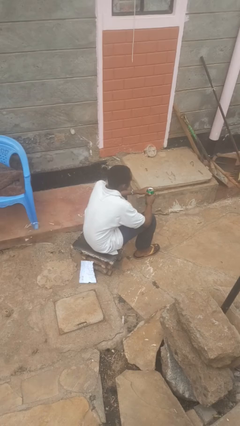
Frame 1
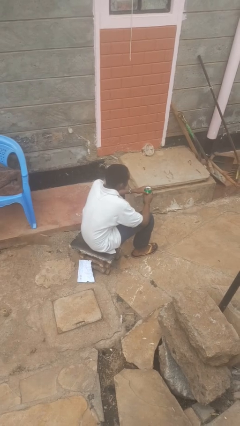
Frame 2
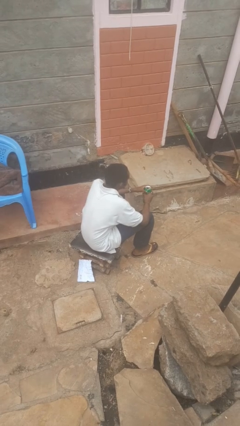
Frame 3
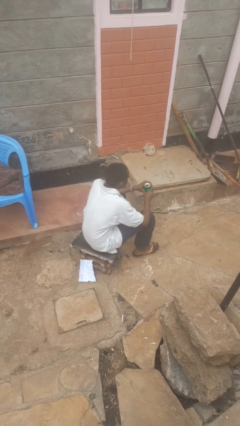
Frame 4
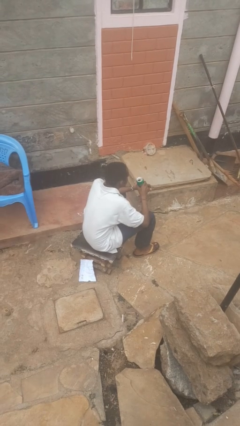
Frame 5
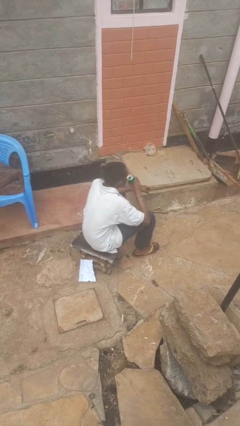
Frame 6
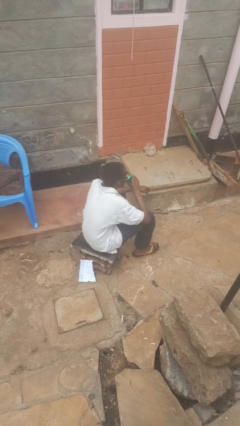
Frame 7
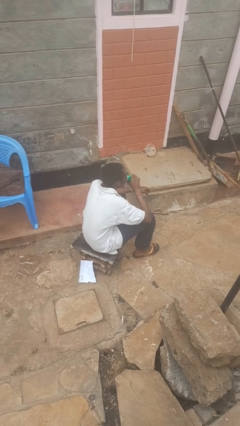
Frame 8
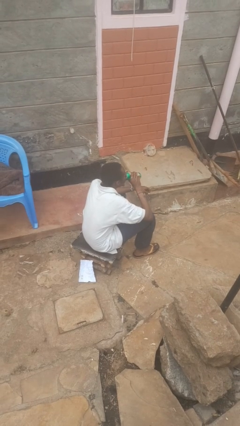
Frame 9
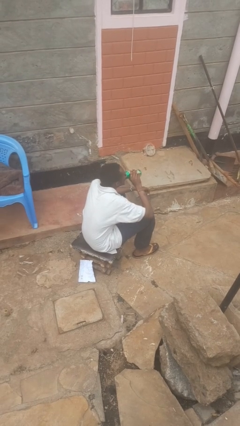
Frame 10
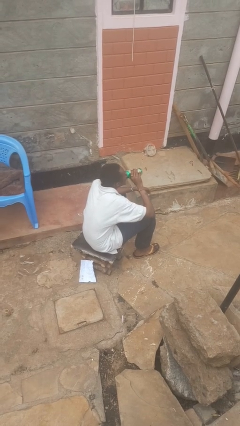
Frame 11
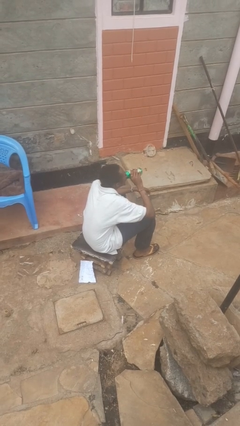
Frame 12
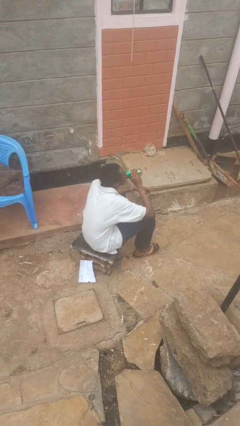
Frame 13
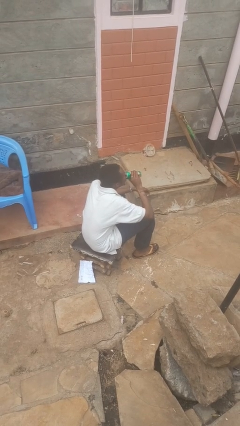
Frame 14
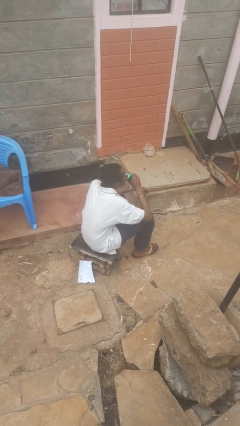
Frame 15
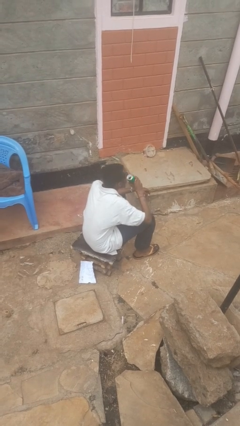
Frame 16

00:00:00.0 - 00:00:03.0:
person drinks from beverage can

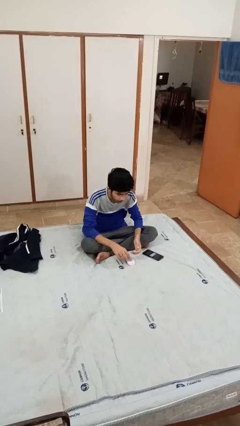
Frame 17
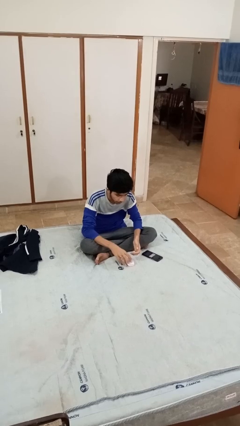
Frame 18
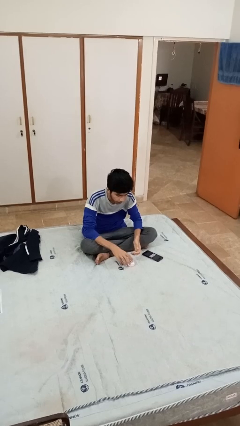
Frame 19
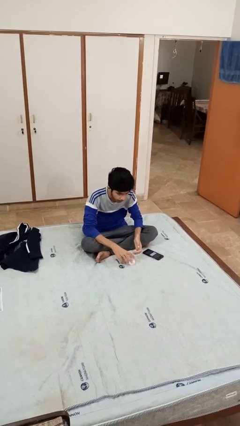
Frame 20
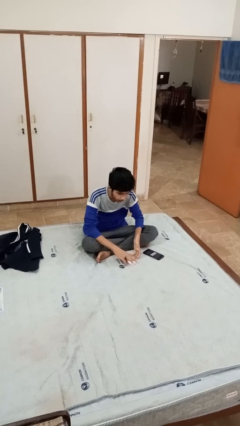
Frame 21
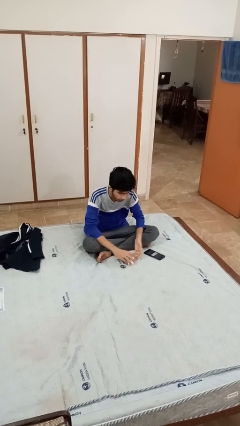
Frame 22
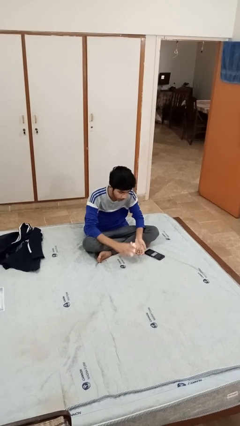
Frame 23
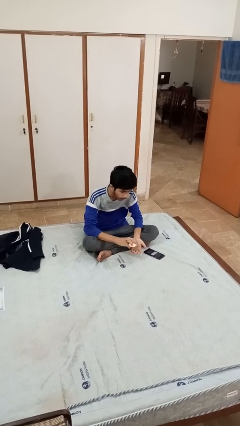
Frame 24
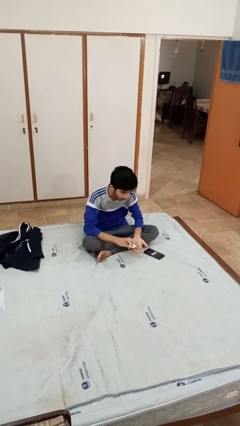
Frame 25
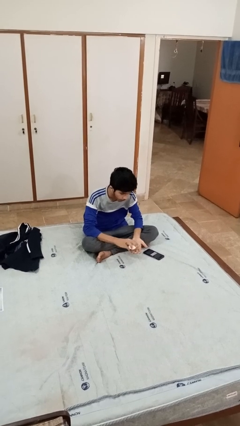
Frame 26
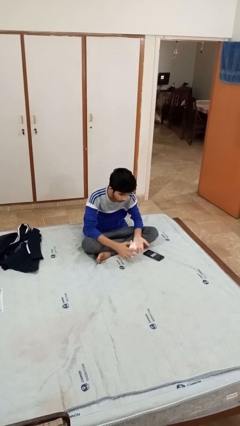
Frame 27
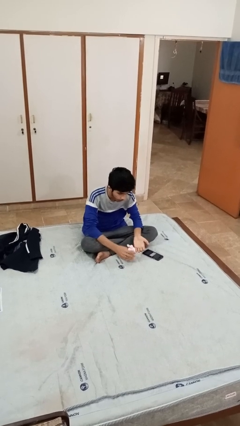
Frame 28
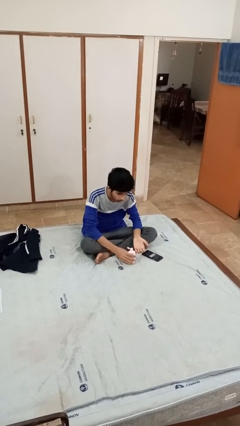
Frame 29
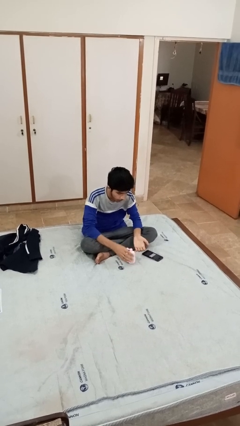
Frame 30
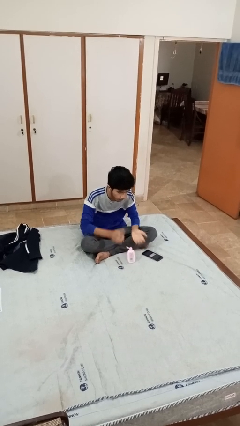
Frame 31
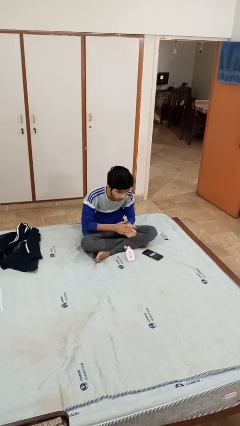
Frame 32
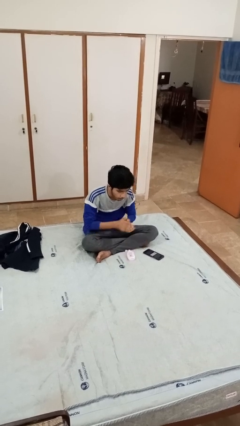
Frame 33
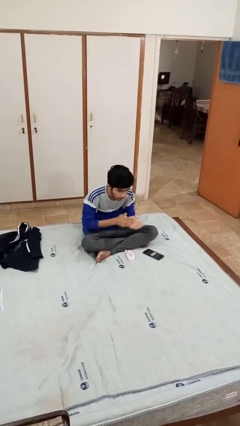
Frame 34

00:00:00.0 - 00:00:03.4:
person applies facial moisturizer

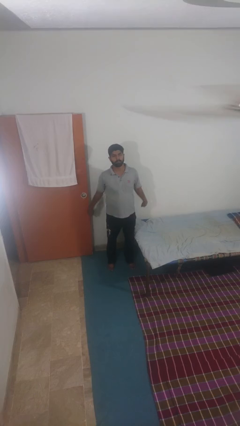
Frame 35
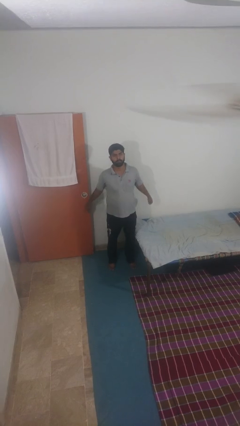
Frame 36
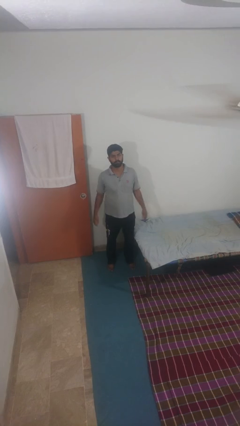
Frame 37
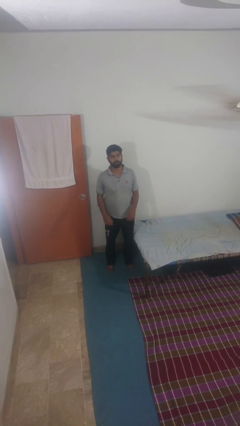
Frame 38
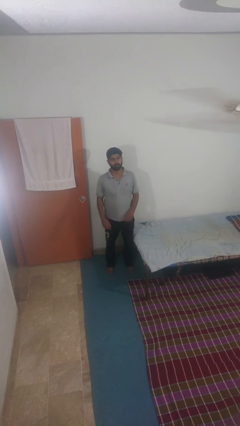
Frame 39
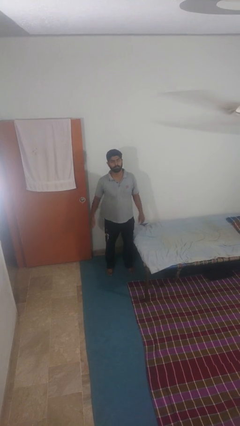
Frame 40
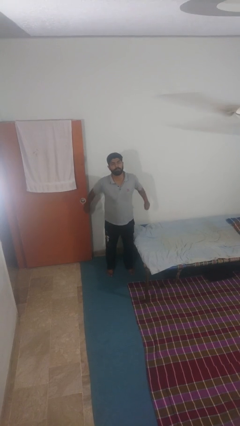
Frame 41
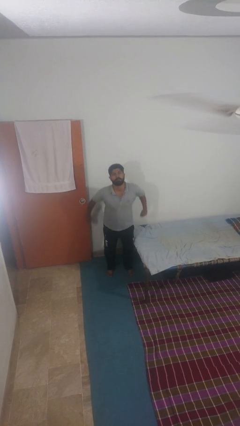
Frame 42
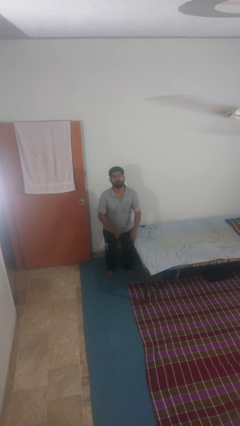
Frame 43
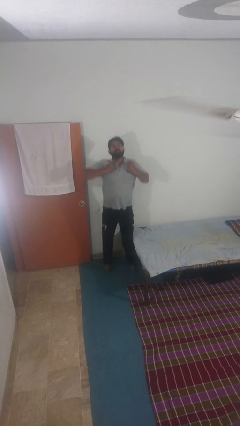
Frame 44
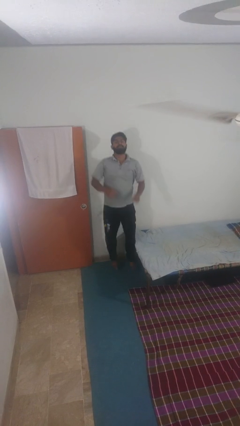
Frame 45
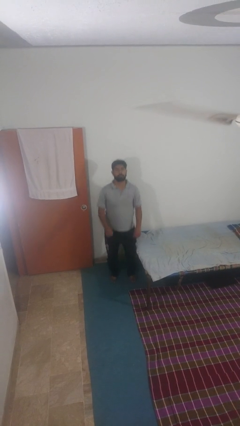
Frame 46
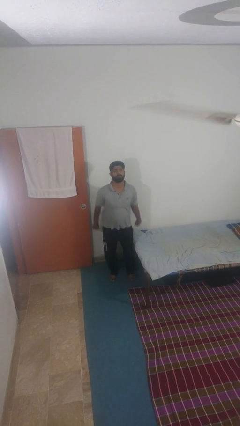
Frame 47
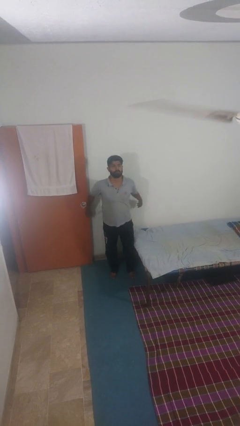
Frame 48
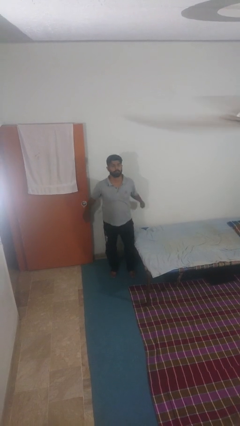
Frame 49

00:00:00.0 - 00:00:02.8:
person jumps

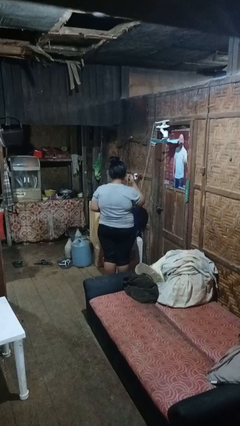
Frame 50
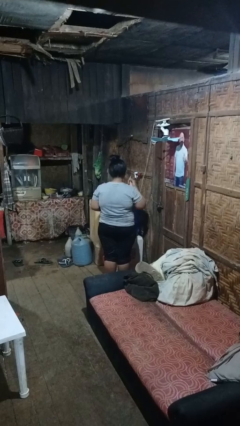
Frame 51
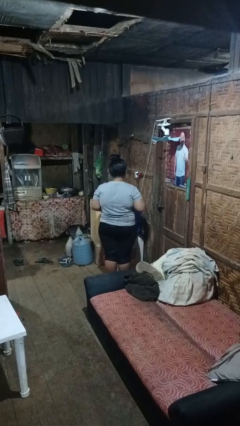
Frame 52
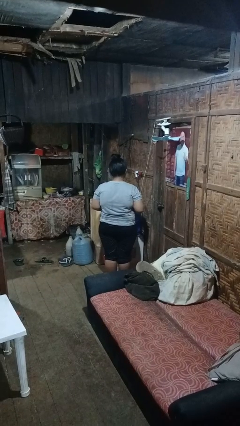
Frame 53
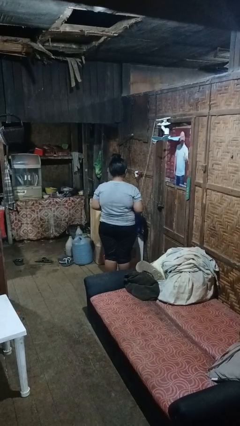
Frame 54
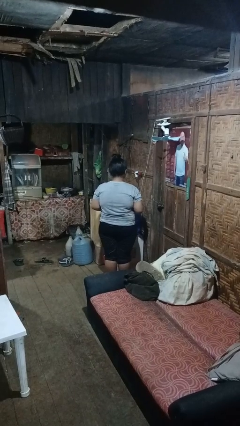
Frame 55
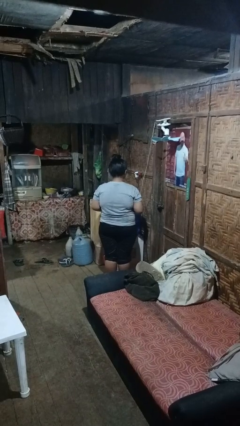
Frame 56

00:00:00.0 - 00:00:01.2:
person takes off headphones

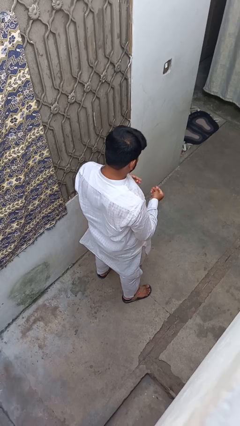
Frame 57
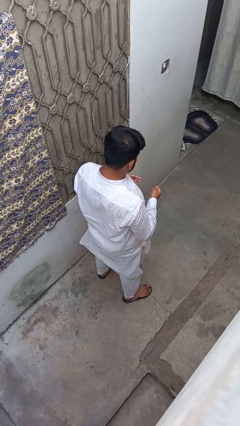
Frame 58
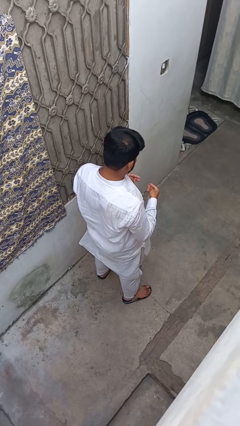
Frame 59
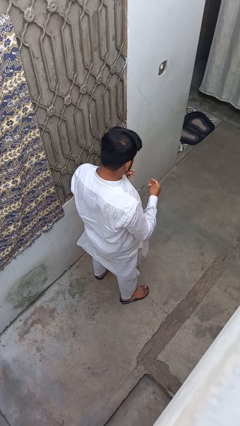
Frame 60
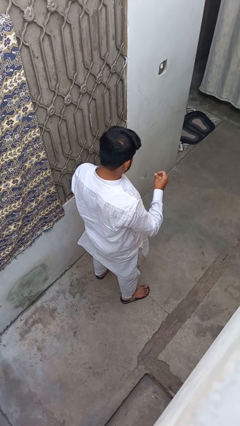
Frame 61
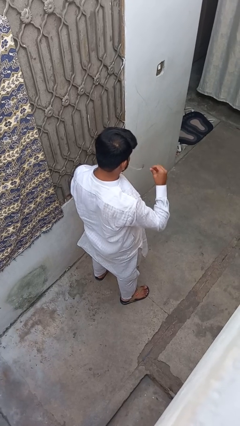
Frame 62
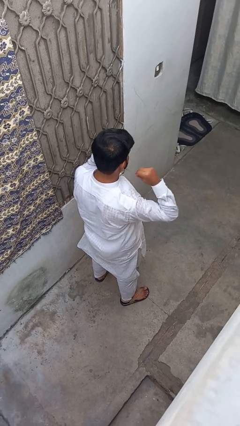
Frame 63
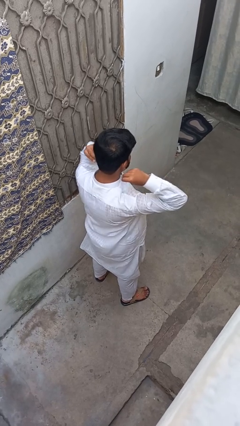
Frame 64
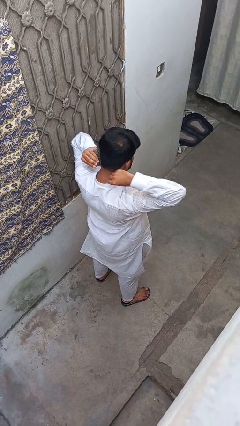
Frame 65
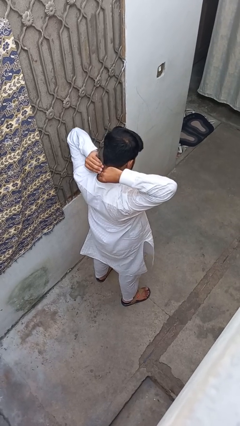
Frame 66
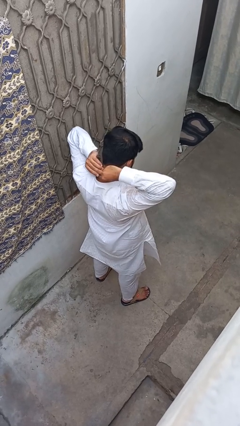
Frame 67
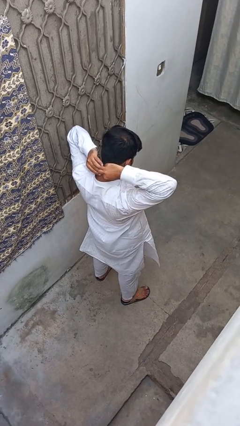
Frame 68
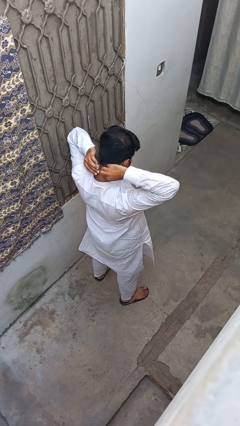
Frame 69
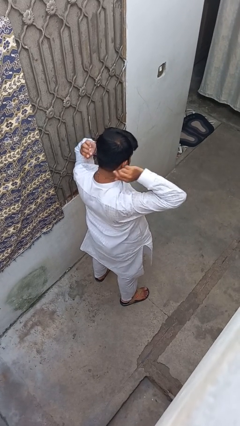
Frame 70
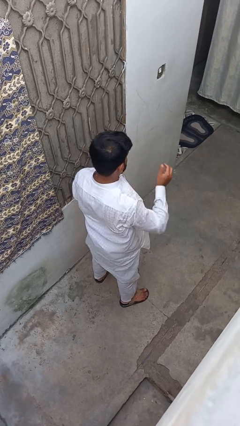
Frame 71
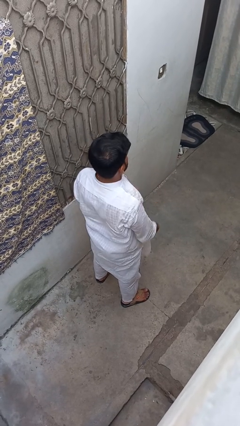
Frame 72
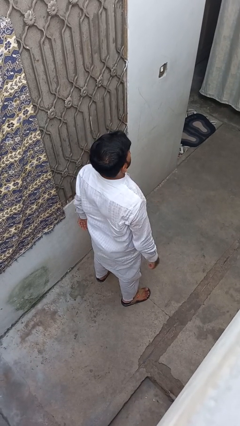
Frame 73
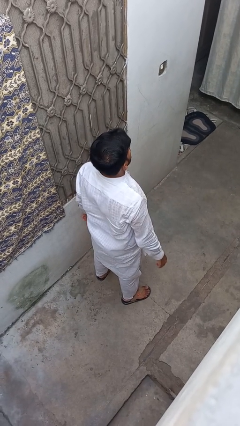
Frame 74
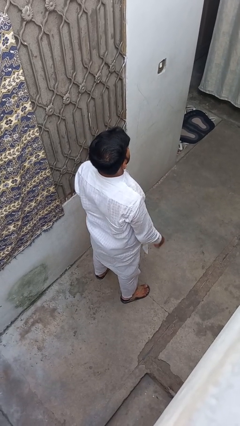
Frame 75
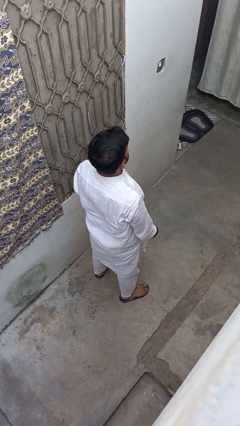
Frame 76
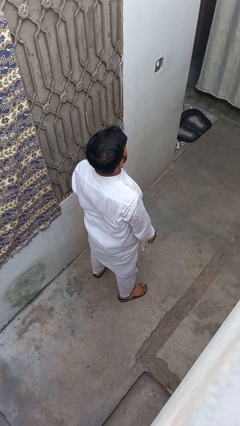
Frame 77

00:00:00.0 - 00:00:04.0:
person puts on necklace

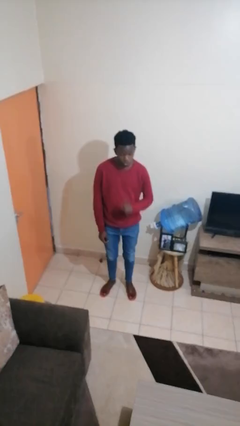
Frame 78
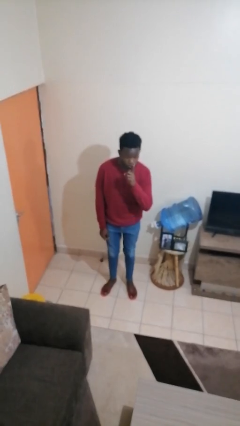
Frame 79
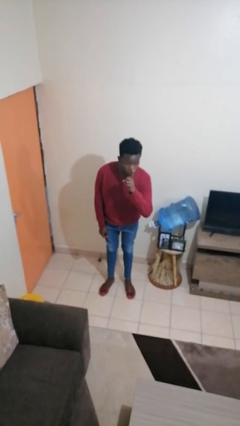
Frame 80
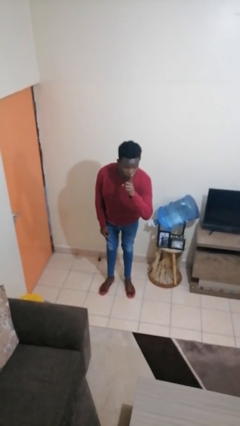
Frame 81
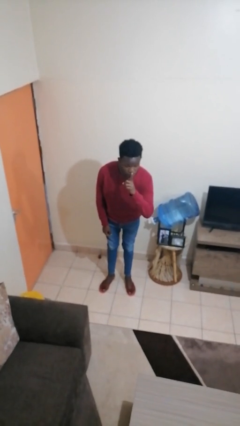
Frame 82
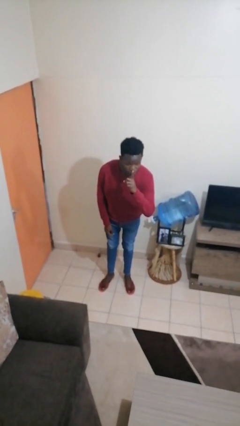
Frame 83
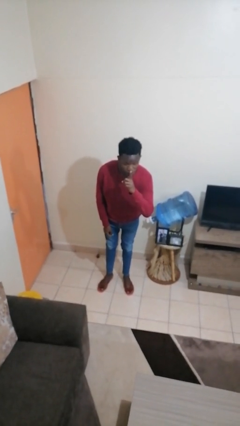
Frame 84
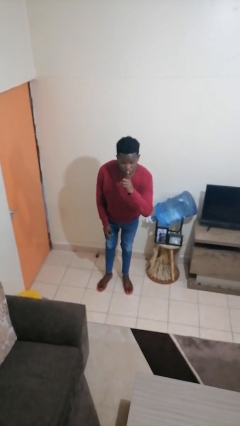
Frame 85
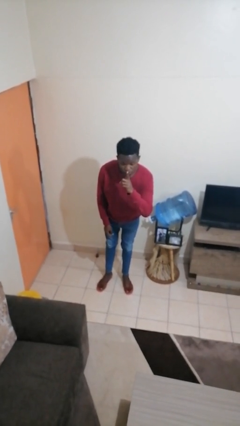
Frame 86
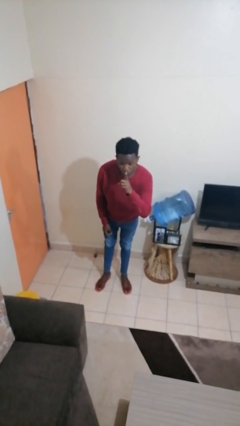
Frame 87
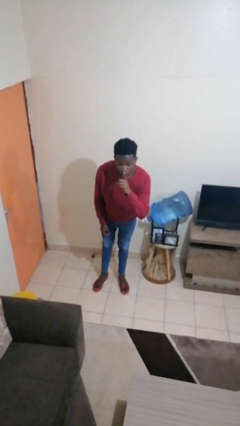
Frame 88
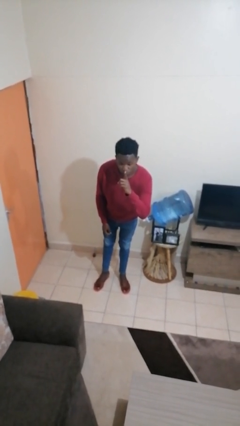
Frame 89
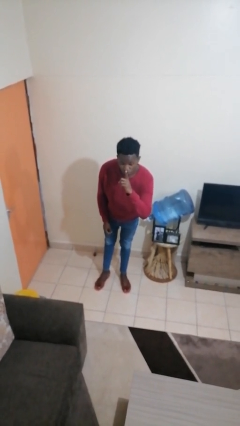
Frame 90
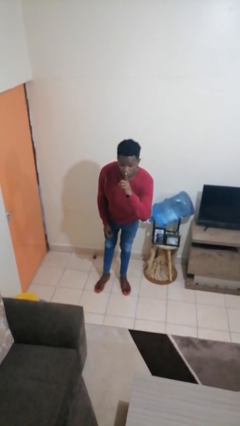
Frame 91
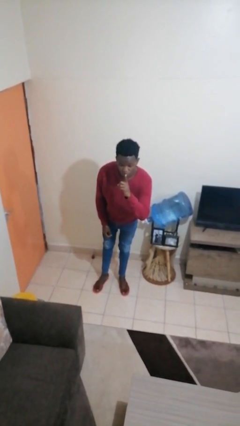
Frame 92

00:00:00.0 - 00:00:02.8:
person gestures be quiet

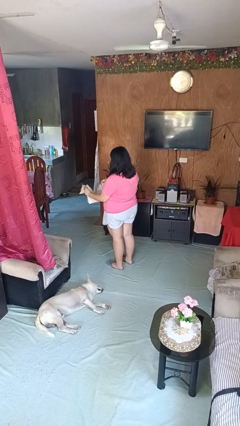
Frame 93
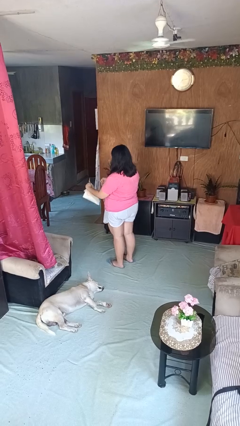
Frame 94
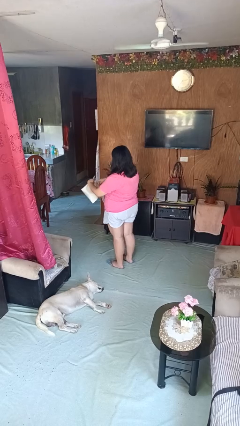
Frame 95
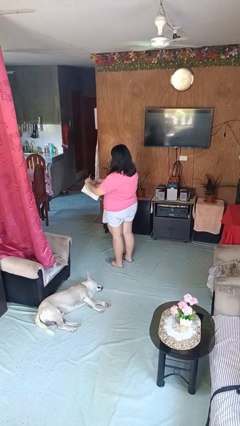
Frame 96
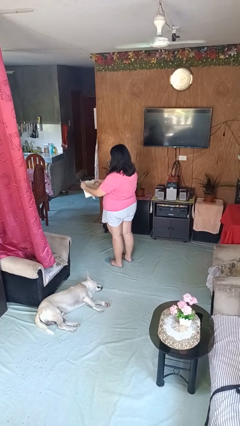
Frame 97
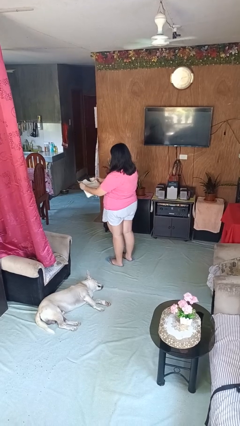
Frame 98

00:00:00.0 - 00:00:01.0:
person tears paper
